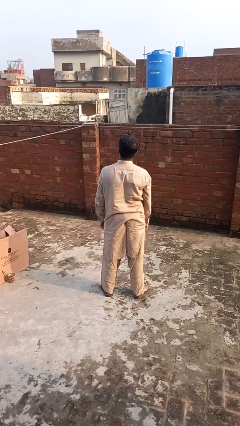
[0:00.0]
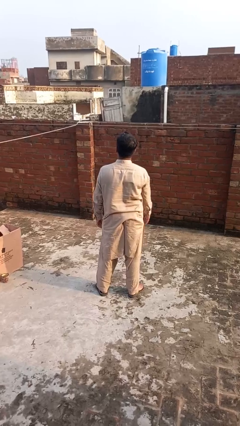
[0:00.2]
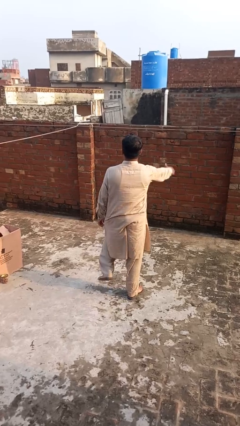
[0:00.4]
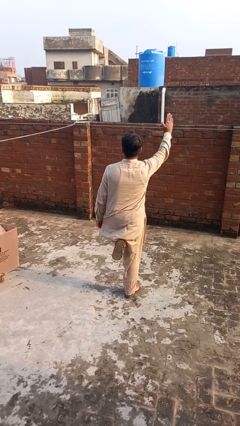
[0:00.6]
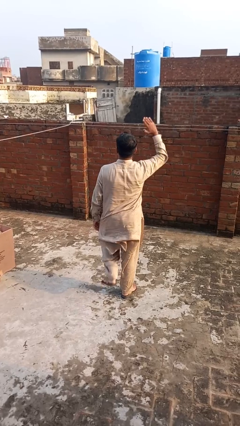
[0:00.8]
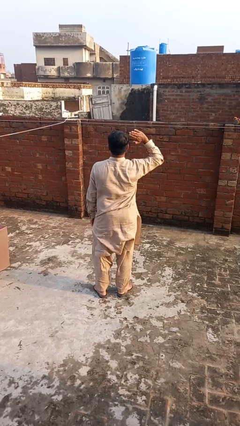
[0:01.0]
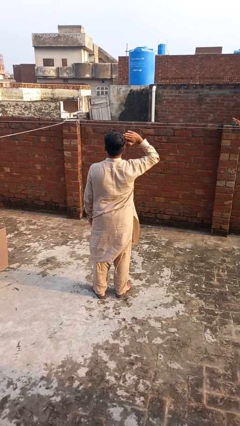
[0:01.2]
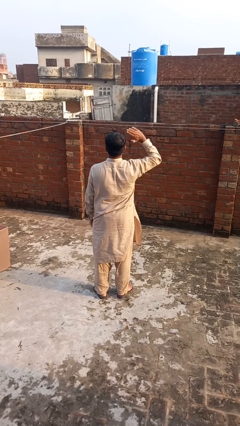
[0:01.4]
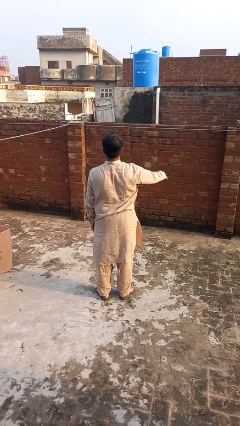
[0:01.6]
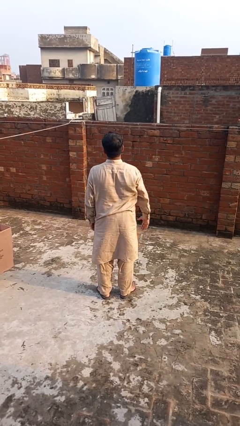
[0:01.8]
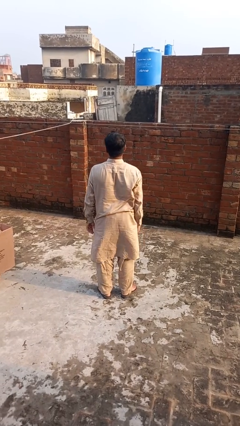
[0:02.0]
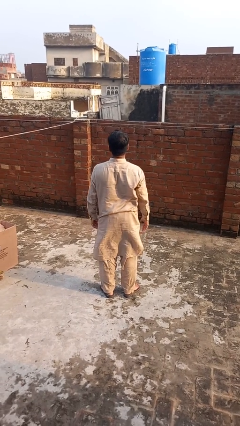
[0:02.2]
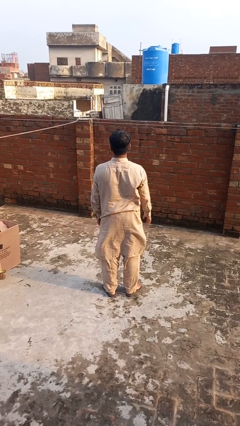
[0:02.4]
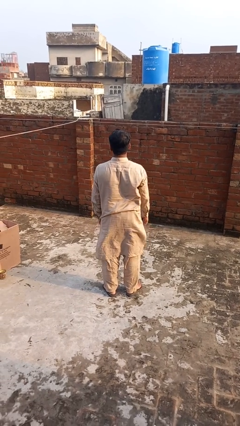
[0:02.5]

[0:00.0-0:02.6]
person salutes

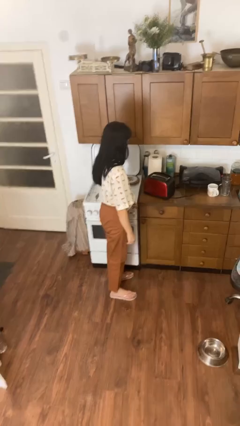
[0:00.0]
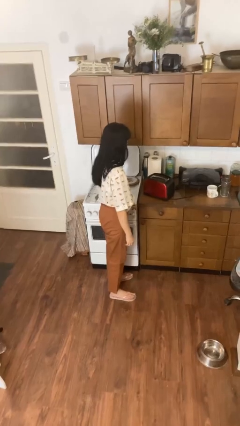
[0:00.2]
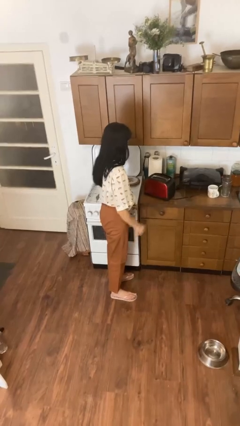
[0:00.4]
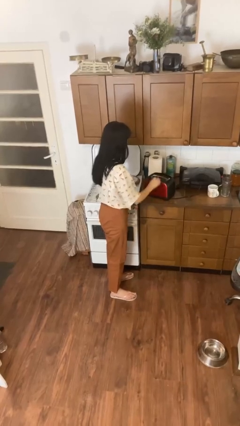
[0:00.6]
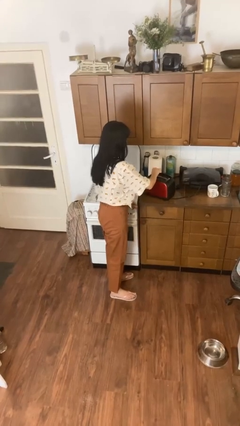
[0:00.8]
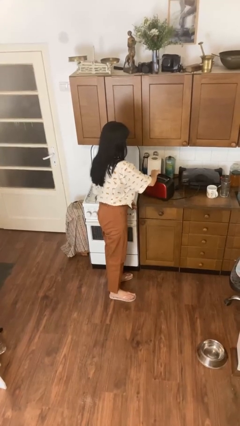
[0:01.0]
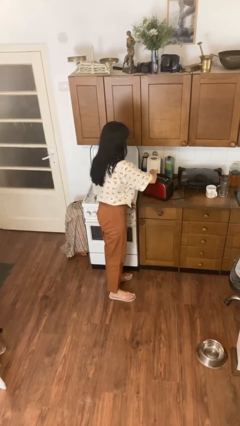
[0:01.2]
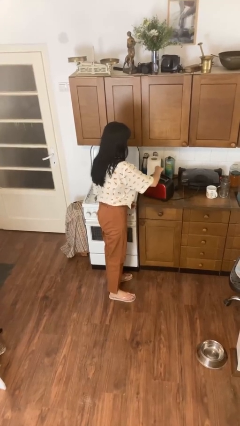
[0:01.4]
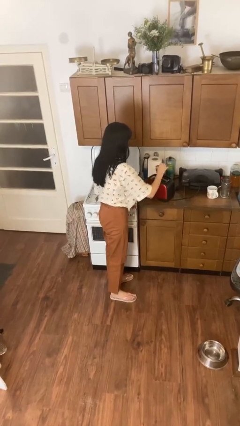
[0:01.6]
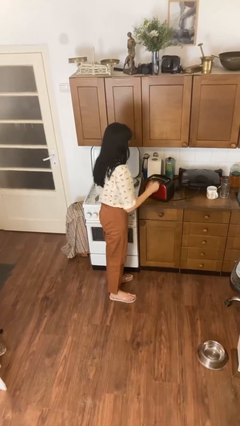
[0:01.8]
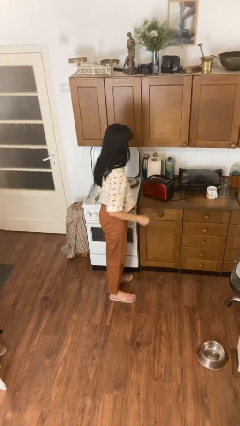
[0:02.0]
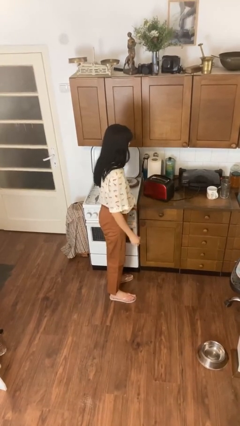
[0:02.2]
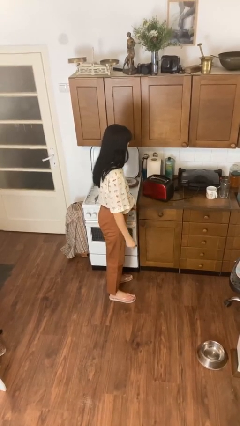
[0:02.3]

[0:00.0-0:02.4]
person takes object from toaster

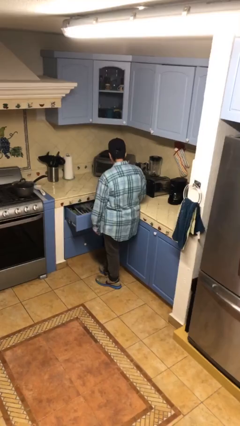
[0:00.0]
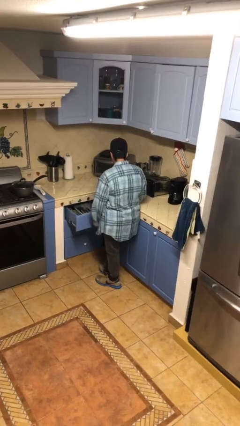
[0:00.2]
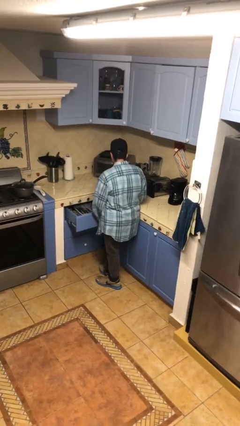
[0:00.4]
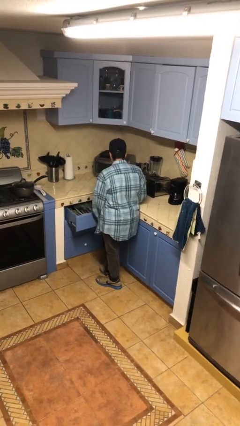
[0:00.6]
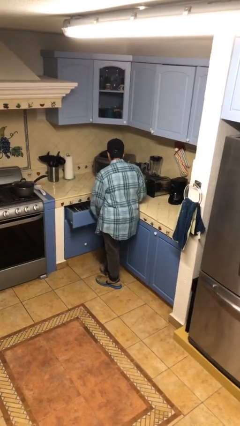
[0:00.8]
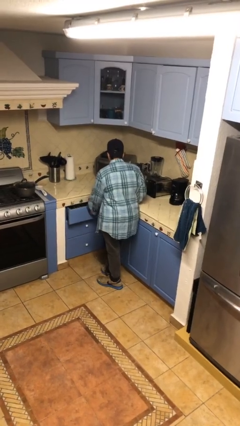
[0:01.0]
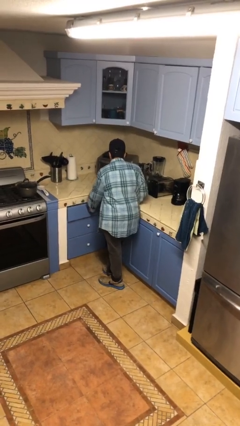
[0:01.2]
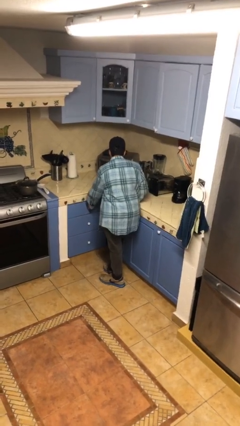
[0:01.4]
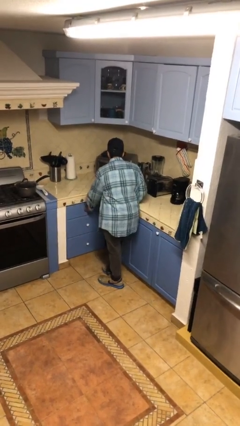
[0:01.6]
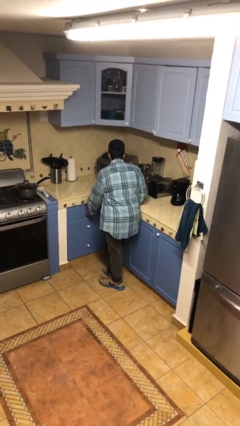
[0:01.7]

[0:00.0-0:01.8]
person closes kitchen drawer

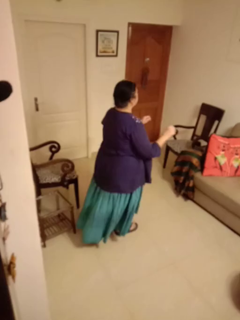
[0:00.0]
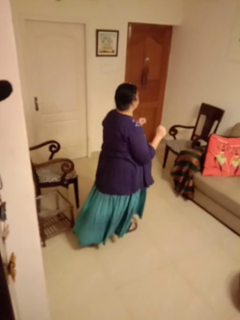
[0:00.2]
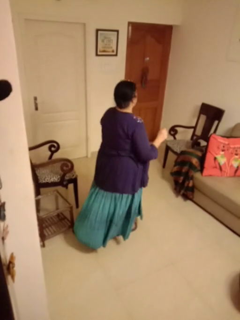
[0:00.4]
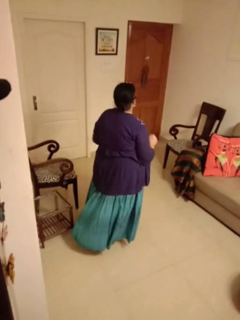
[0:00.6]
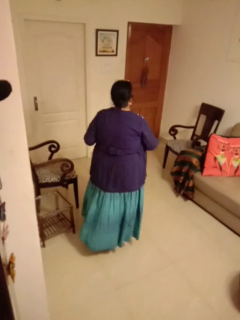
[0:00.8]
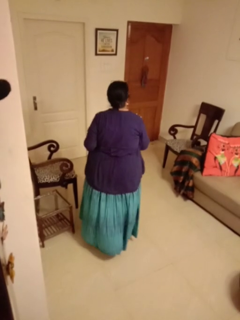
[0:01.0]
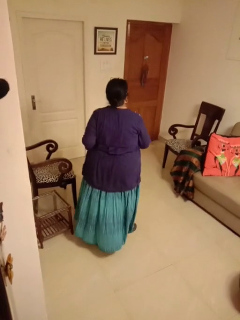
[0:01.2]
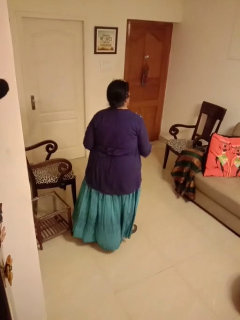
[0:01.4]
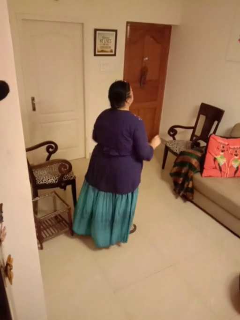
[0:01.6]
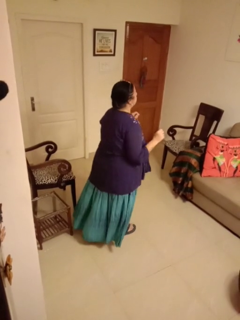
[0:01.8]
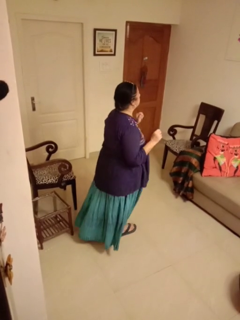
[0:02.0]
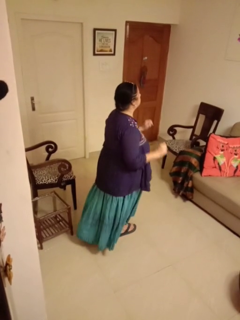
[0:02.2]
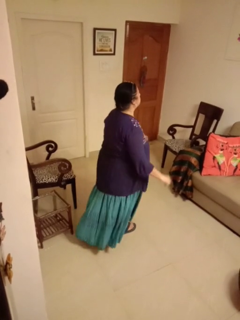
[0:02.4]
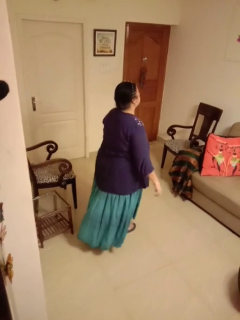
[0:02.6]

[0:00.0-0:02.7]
person dances in place

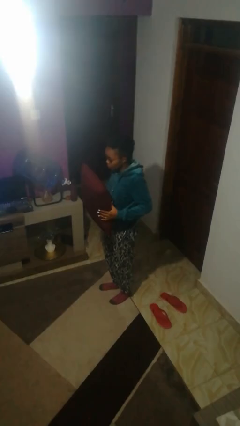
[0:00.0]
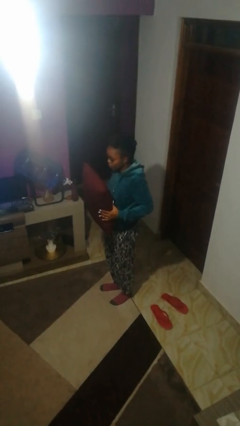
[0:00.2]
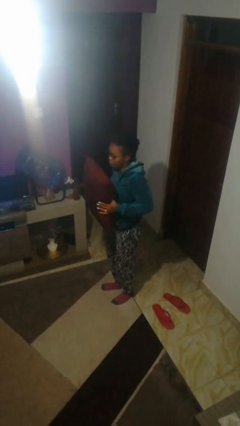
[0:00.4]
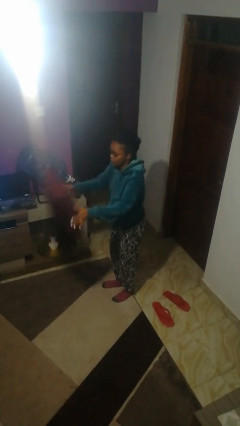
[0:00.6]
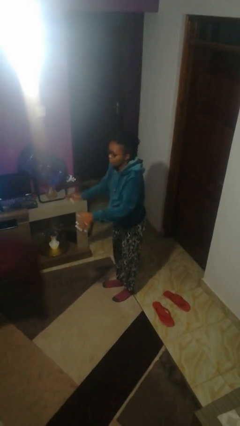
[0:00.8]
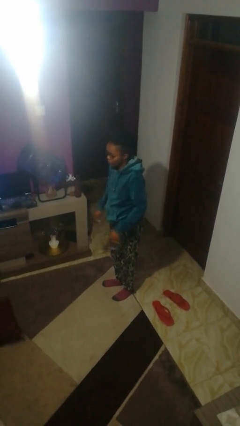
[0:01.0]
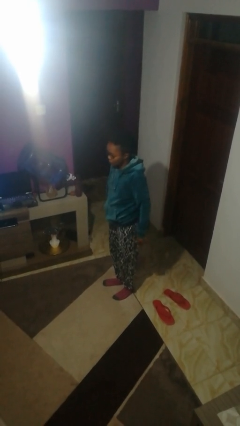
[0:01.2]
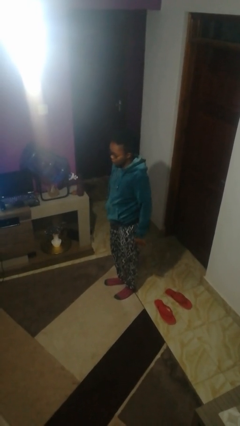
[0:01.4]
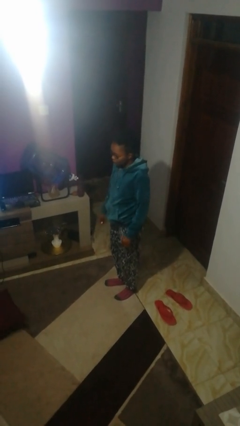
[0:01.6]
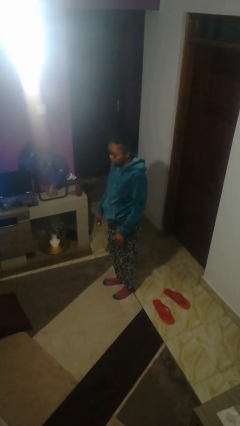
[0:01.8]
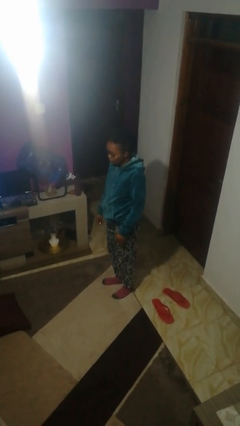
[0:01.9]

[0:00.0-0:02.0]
person throws object to ground

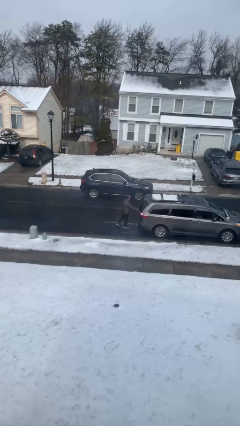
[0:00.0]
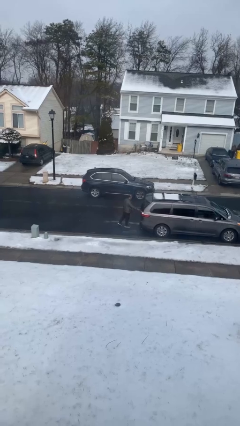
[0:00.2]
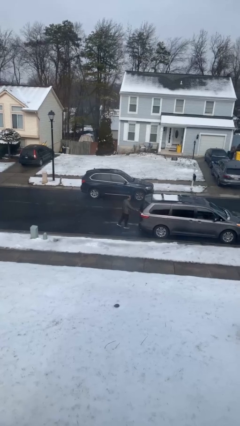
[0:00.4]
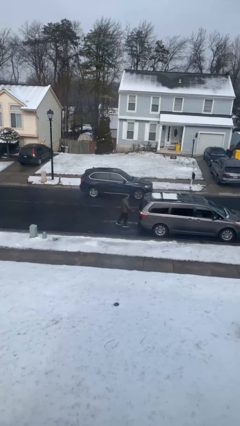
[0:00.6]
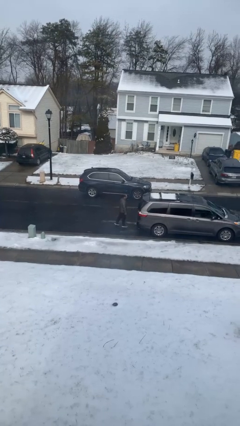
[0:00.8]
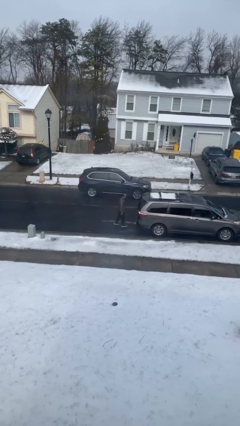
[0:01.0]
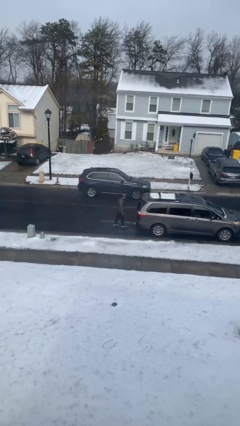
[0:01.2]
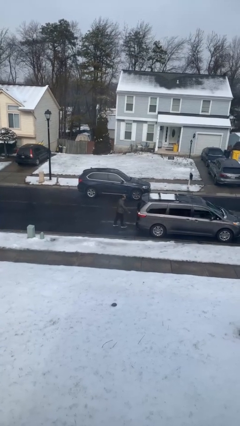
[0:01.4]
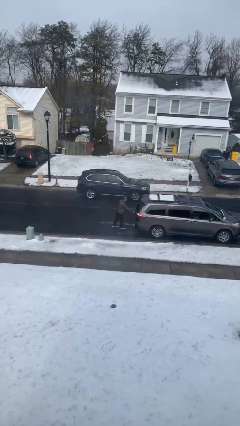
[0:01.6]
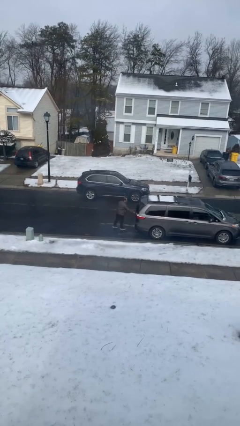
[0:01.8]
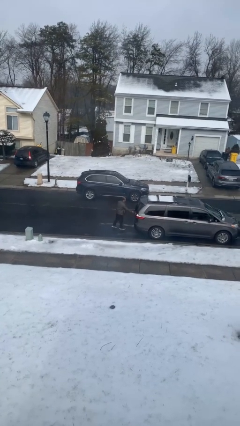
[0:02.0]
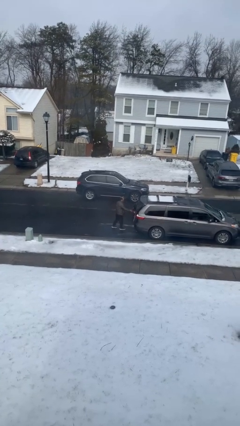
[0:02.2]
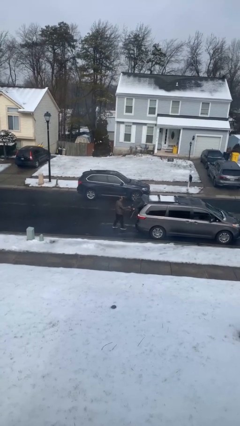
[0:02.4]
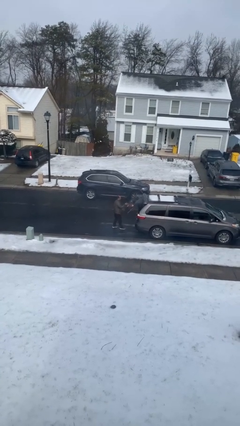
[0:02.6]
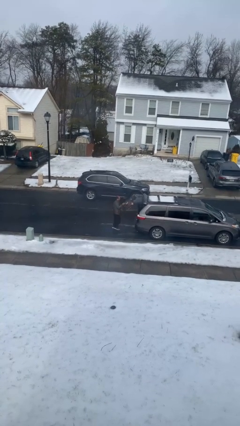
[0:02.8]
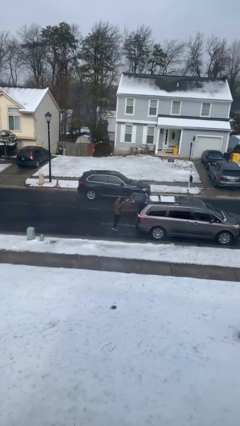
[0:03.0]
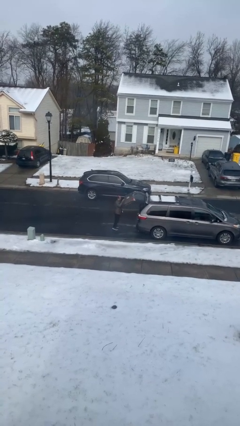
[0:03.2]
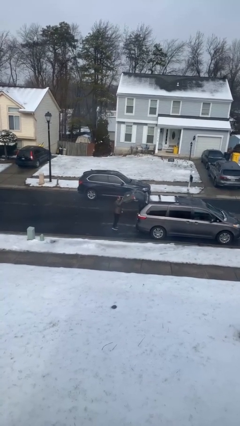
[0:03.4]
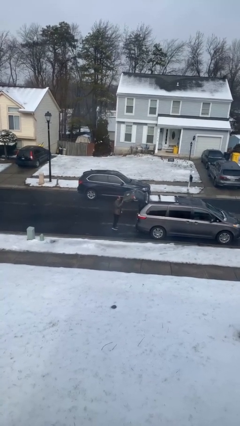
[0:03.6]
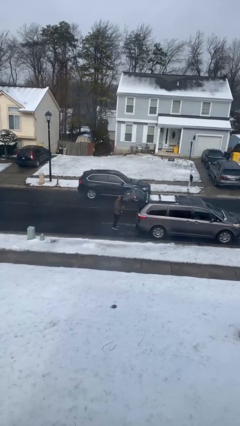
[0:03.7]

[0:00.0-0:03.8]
person opens car trunk

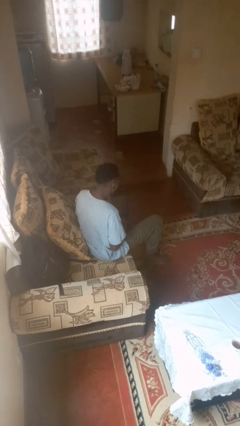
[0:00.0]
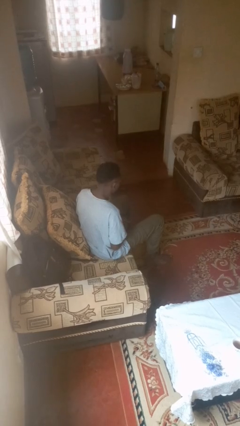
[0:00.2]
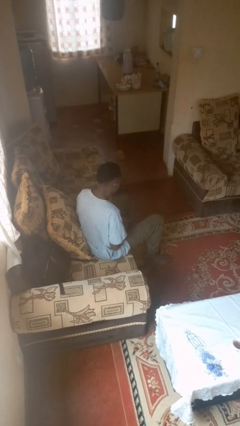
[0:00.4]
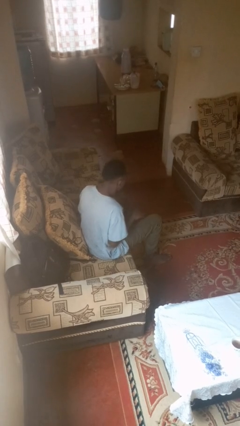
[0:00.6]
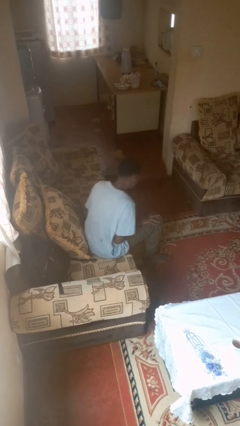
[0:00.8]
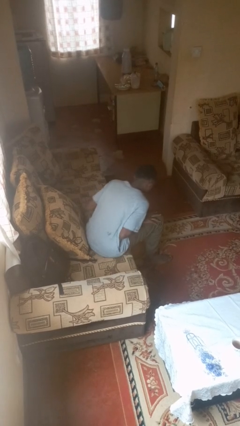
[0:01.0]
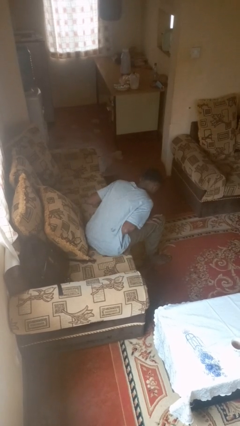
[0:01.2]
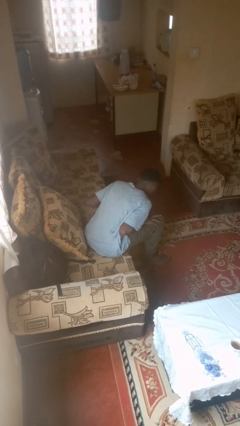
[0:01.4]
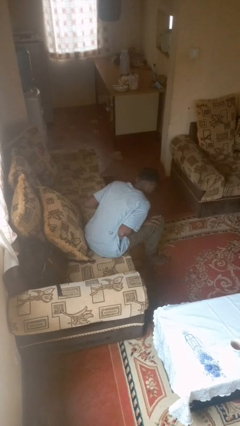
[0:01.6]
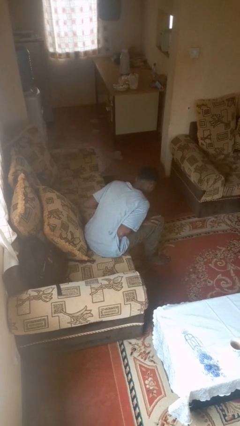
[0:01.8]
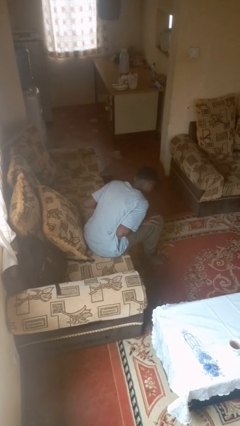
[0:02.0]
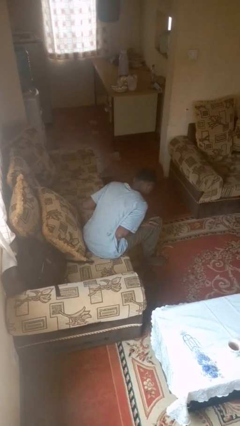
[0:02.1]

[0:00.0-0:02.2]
person slaps hands on thighs

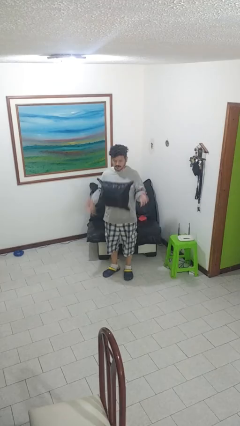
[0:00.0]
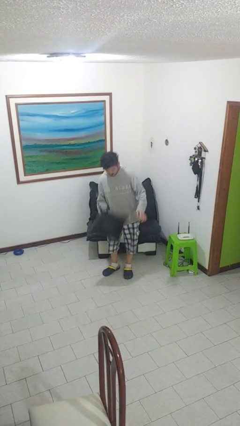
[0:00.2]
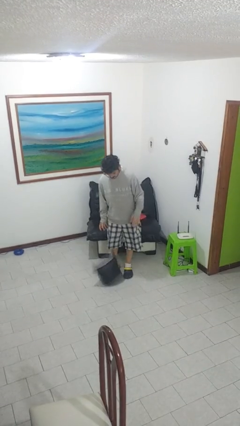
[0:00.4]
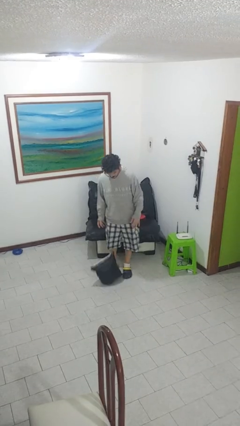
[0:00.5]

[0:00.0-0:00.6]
person drops object
